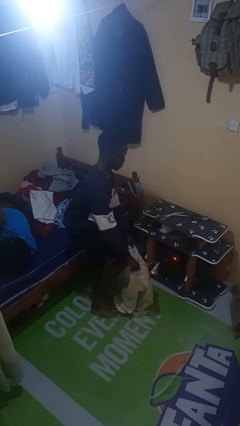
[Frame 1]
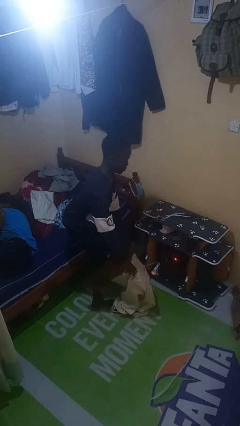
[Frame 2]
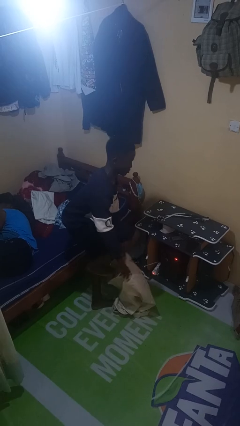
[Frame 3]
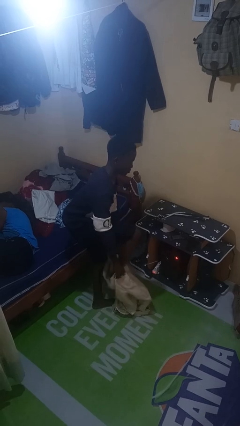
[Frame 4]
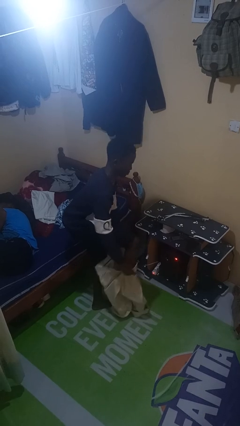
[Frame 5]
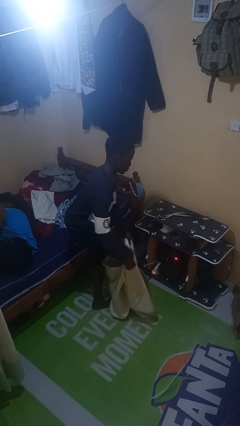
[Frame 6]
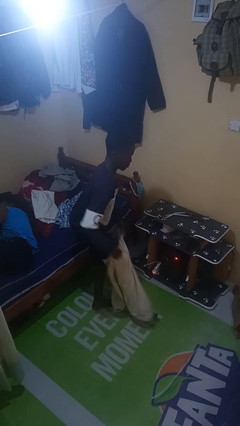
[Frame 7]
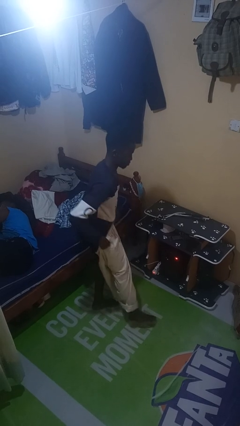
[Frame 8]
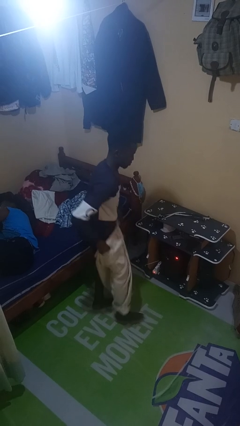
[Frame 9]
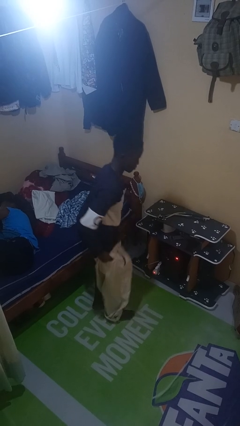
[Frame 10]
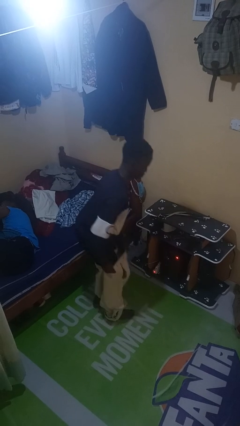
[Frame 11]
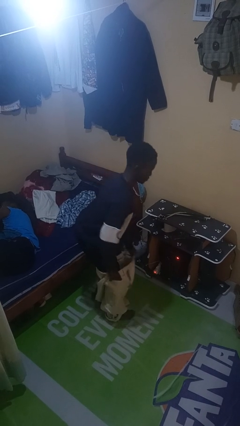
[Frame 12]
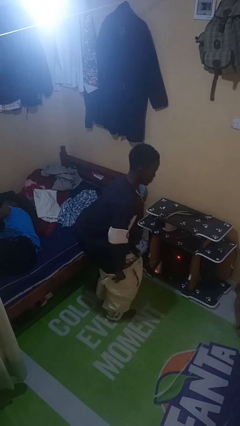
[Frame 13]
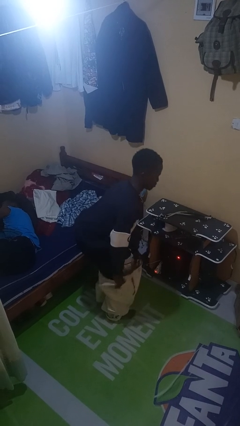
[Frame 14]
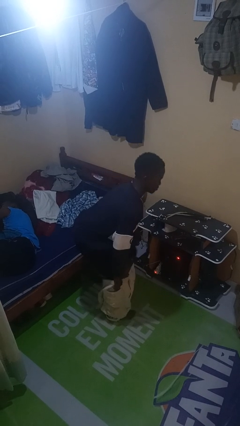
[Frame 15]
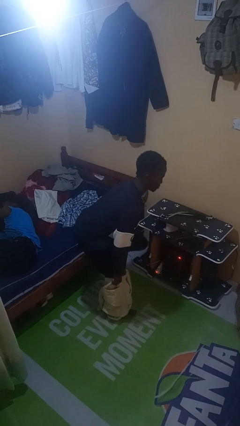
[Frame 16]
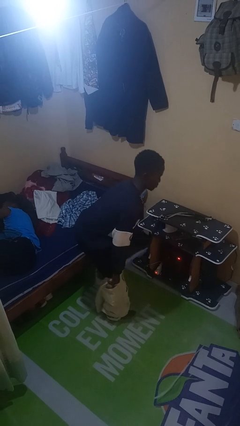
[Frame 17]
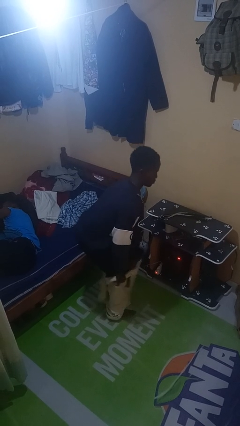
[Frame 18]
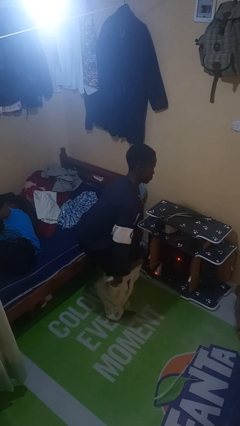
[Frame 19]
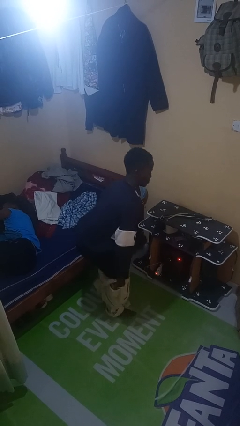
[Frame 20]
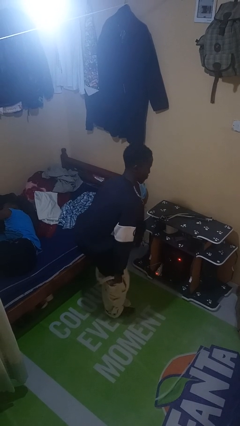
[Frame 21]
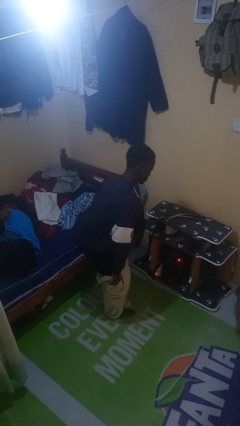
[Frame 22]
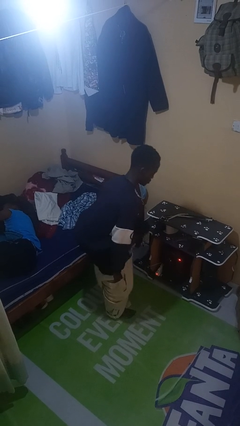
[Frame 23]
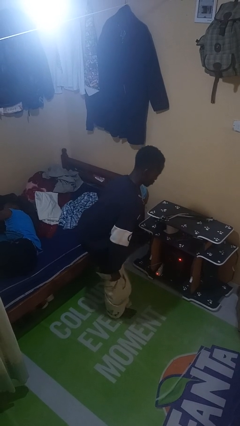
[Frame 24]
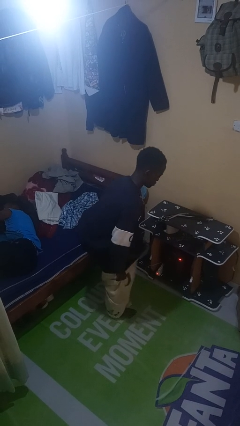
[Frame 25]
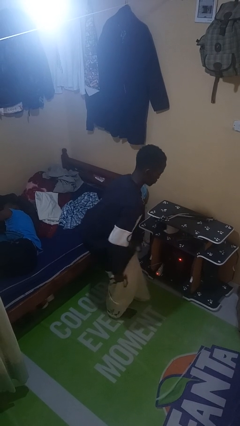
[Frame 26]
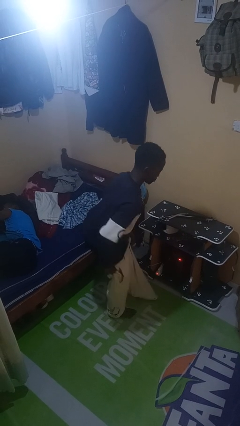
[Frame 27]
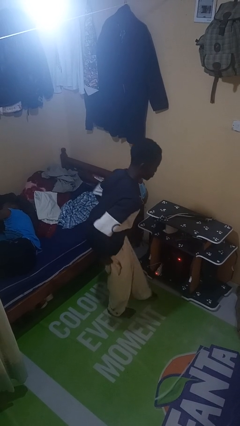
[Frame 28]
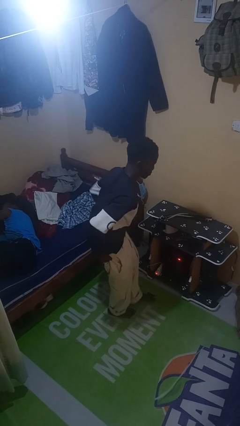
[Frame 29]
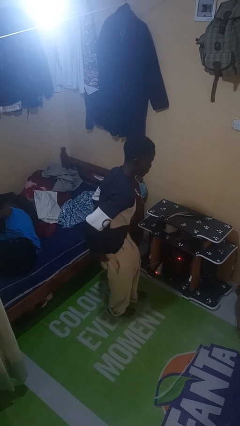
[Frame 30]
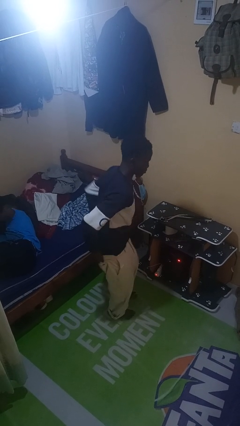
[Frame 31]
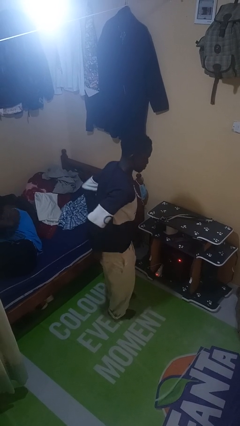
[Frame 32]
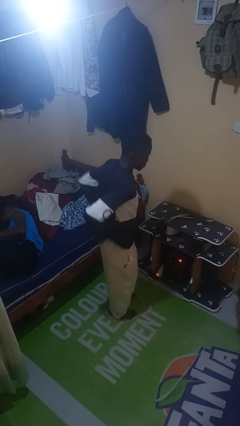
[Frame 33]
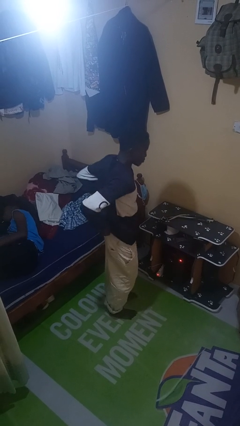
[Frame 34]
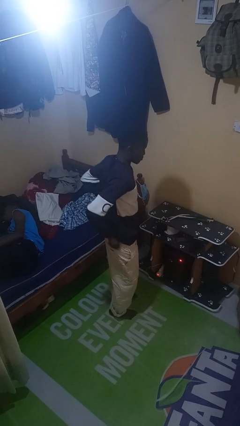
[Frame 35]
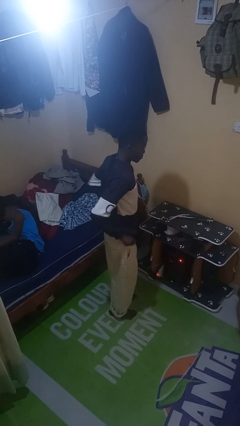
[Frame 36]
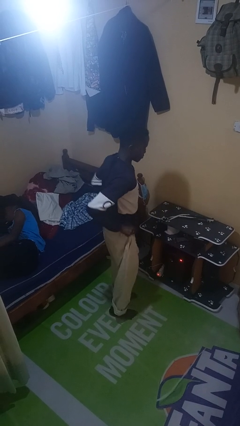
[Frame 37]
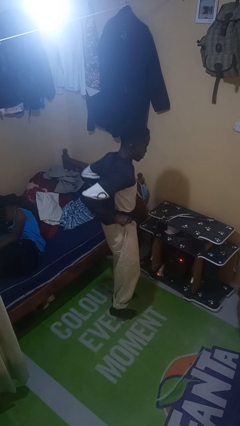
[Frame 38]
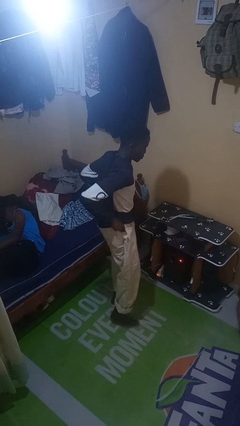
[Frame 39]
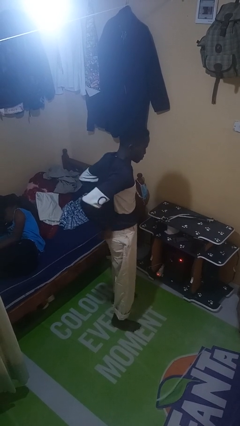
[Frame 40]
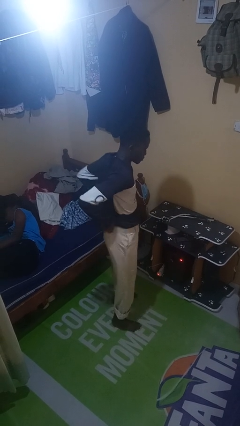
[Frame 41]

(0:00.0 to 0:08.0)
person puts on pants

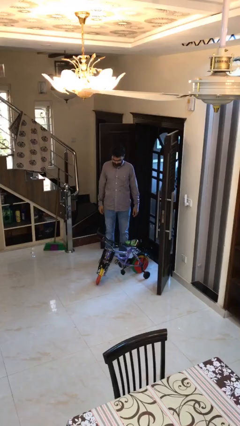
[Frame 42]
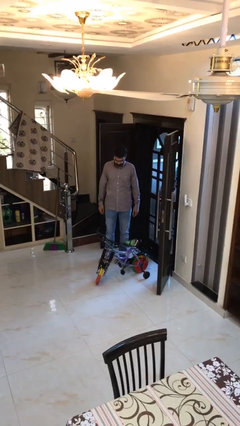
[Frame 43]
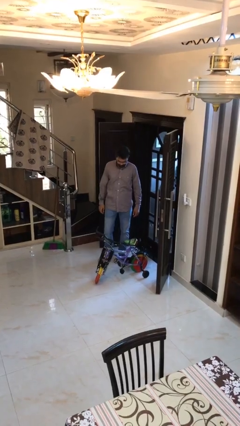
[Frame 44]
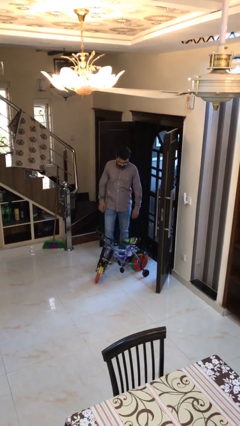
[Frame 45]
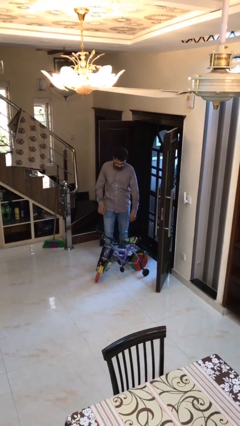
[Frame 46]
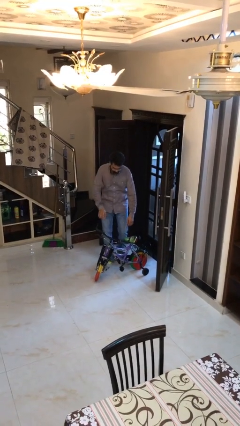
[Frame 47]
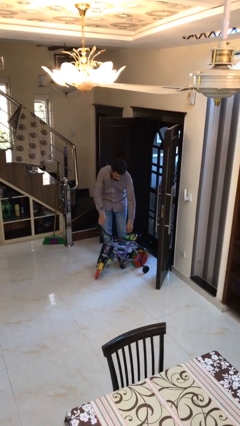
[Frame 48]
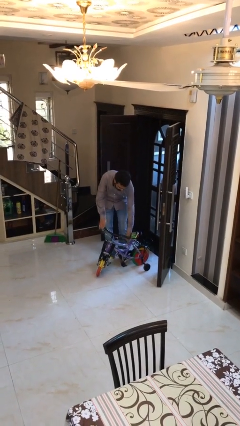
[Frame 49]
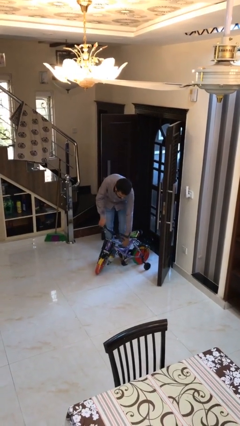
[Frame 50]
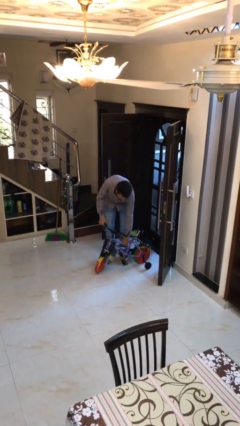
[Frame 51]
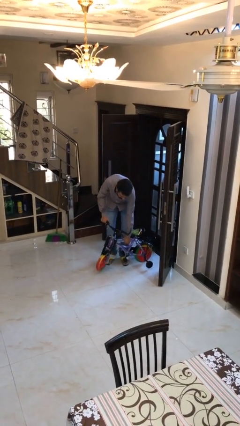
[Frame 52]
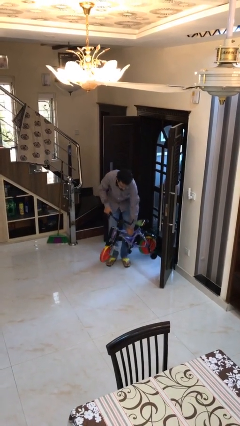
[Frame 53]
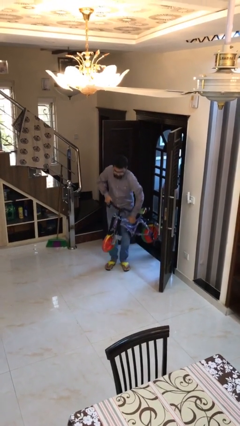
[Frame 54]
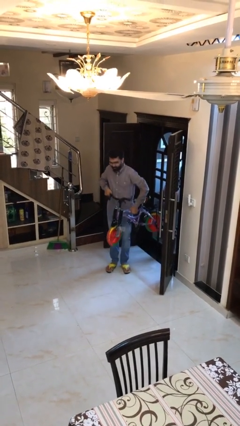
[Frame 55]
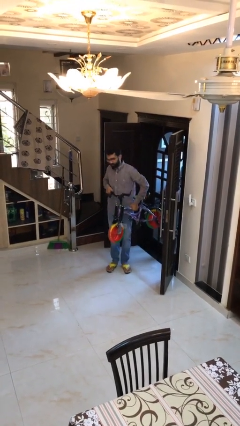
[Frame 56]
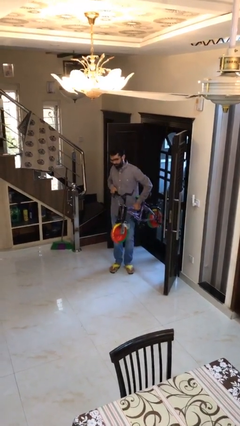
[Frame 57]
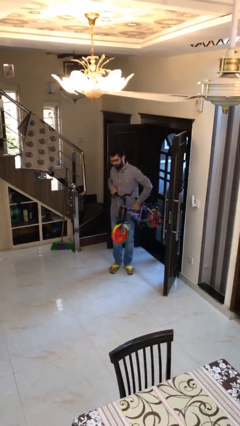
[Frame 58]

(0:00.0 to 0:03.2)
person picks up object from floor

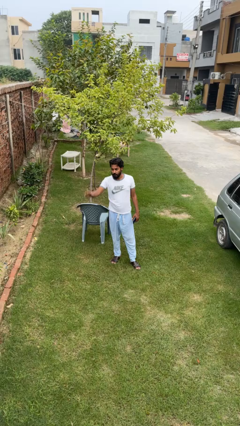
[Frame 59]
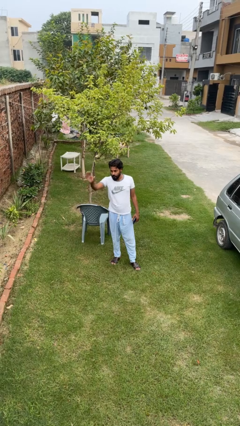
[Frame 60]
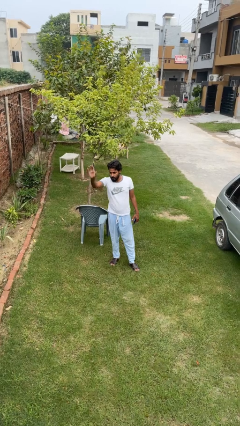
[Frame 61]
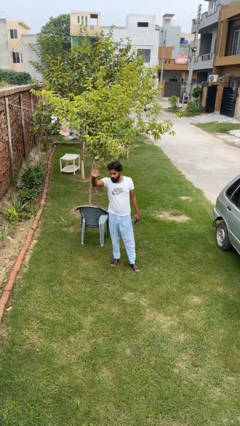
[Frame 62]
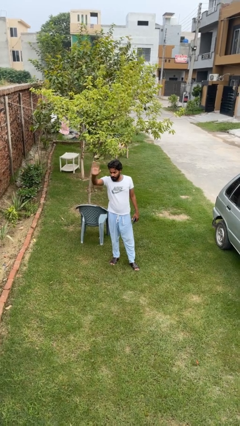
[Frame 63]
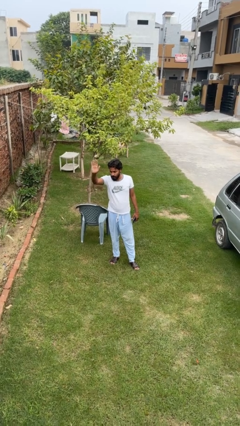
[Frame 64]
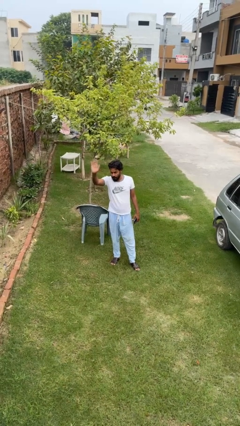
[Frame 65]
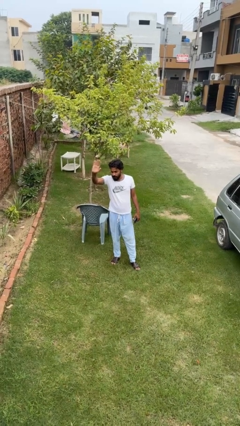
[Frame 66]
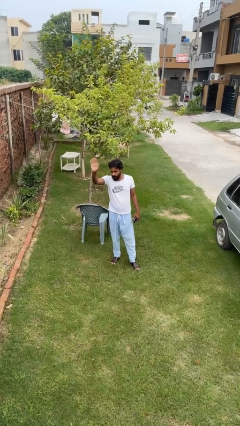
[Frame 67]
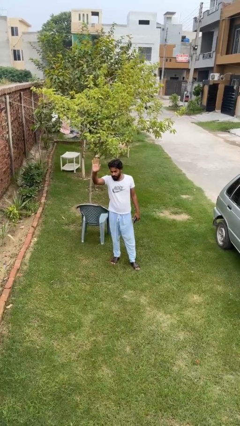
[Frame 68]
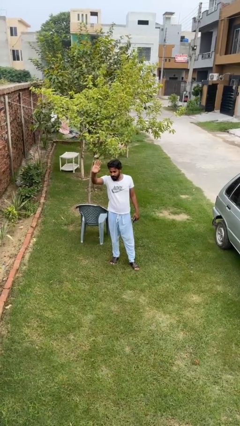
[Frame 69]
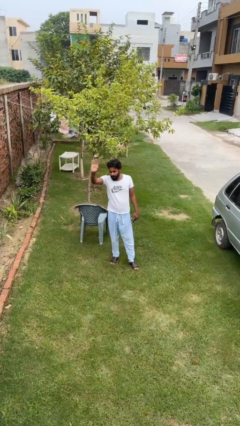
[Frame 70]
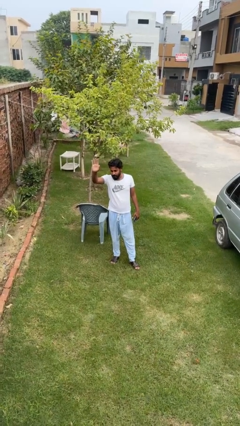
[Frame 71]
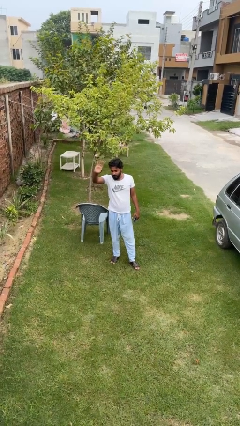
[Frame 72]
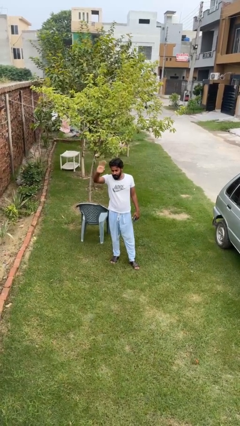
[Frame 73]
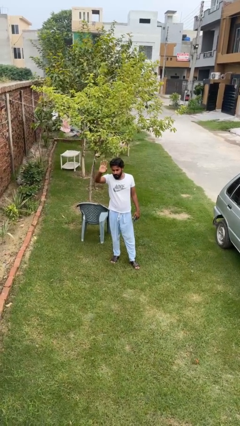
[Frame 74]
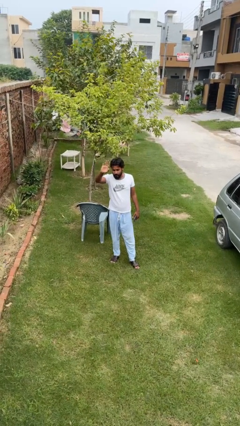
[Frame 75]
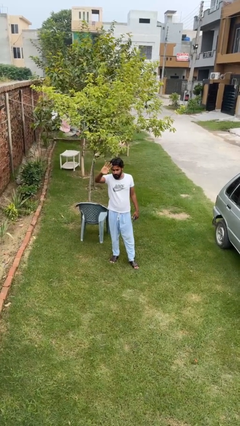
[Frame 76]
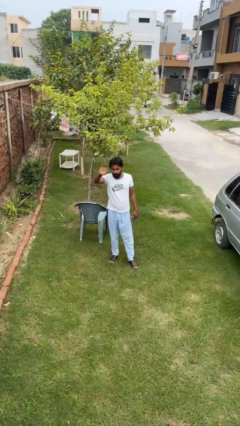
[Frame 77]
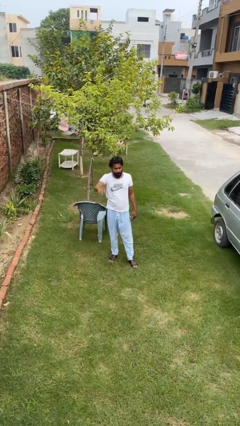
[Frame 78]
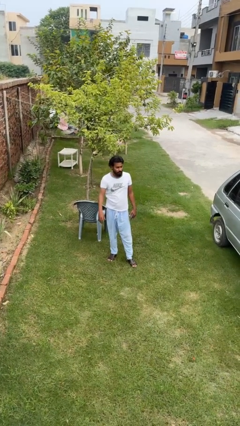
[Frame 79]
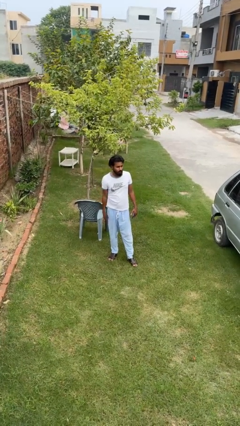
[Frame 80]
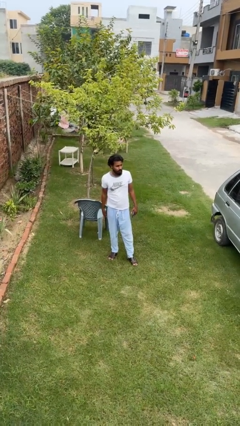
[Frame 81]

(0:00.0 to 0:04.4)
person waves at person

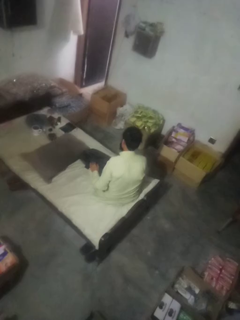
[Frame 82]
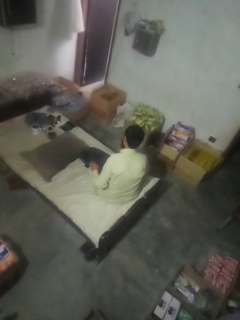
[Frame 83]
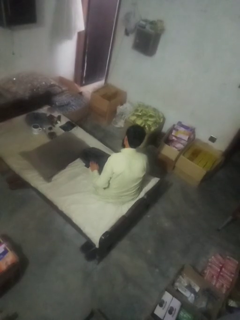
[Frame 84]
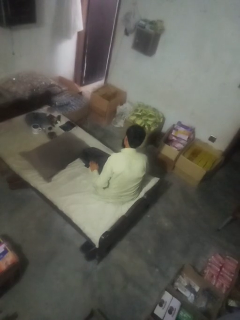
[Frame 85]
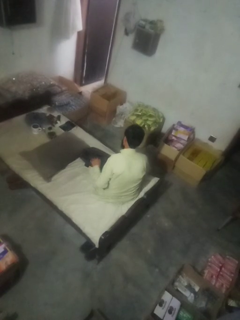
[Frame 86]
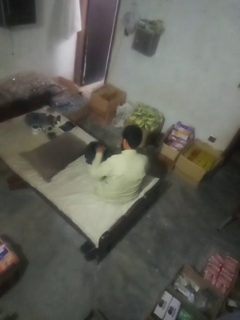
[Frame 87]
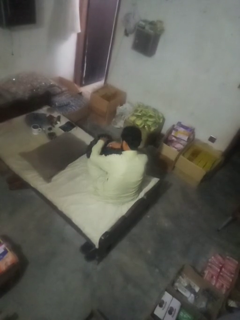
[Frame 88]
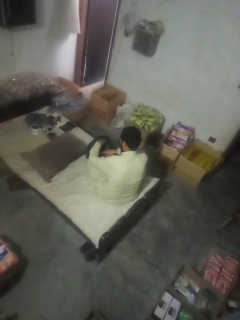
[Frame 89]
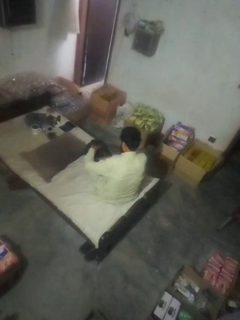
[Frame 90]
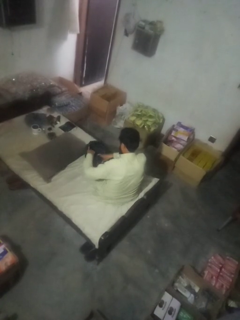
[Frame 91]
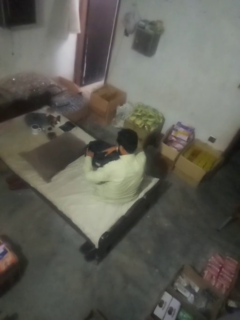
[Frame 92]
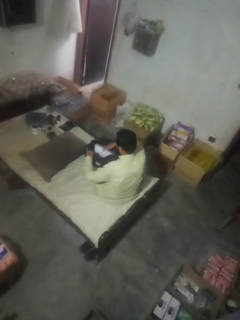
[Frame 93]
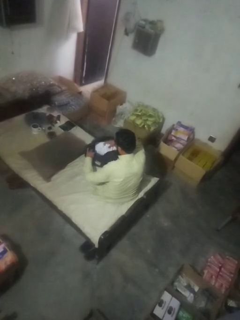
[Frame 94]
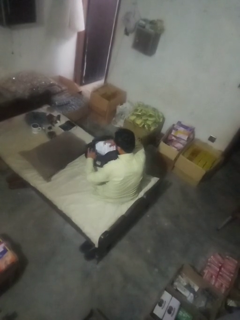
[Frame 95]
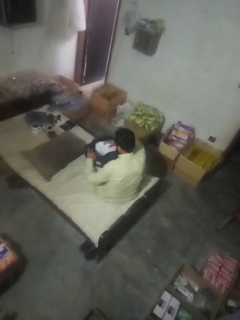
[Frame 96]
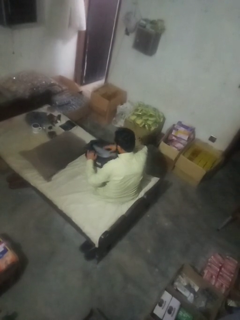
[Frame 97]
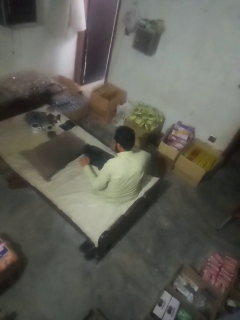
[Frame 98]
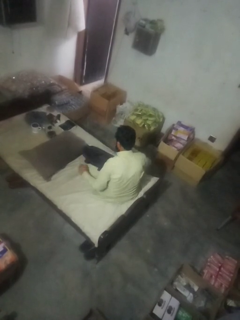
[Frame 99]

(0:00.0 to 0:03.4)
person searches in bag
